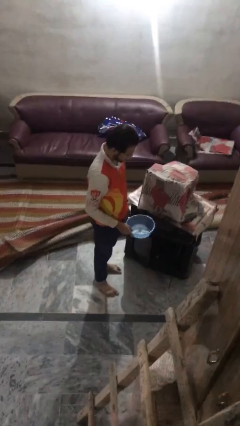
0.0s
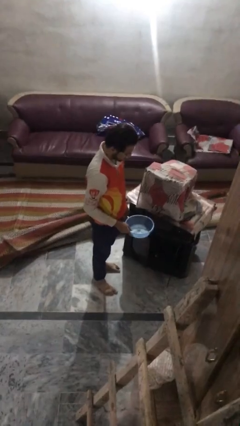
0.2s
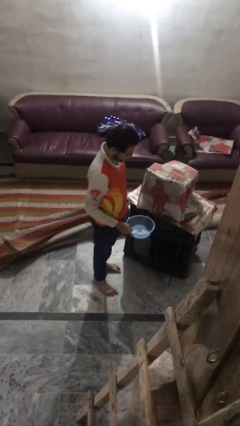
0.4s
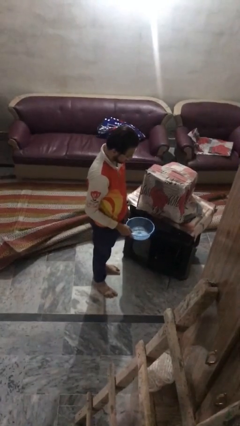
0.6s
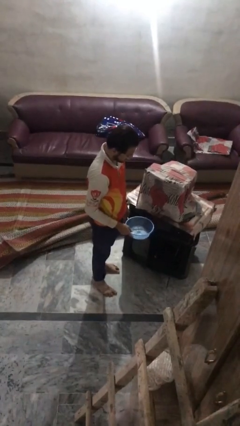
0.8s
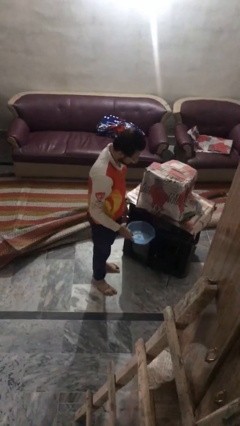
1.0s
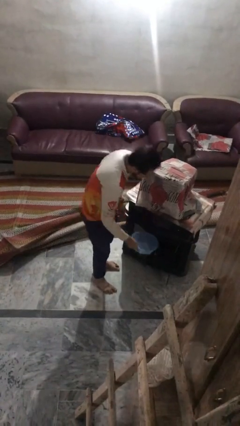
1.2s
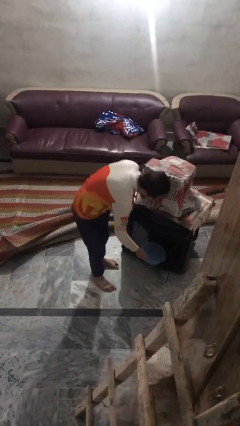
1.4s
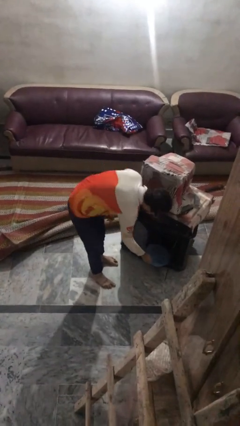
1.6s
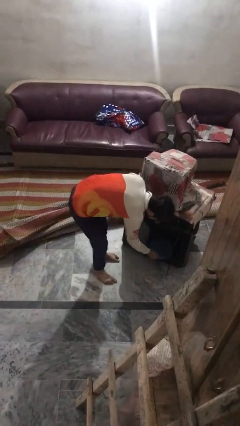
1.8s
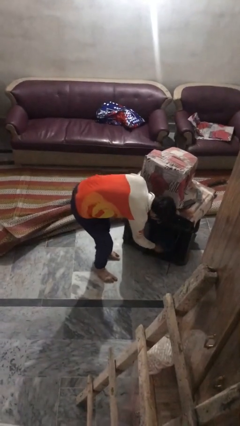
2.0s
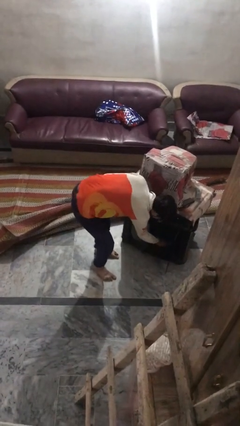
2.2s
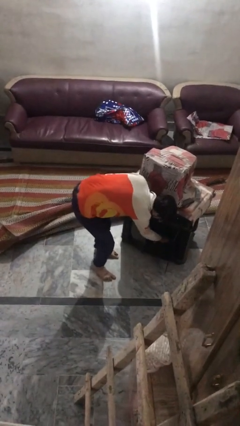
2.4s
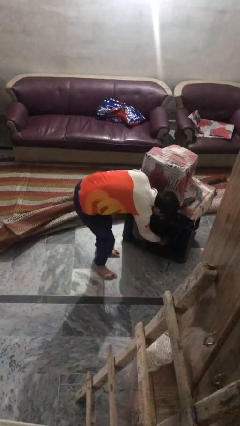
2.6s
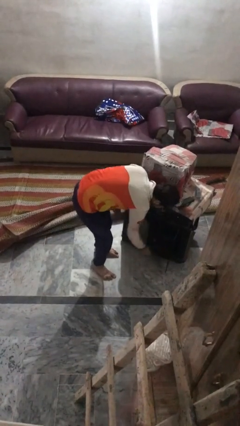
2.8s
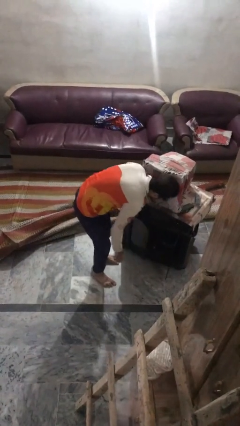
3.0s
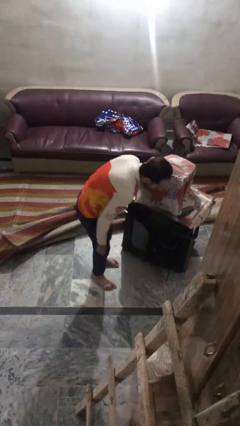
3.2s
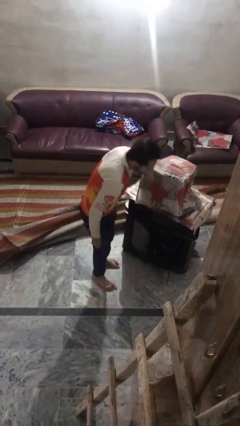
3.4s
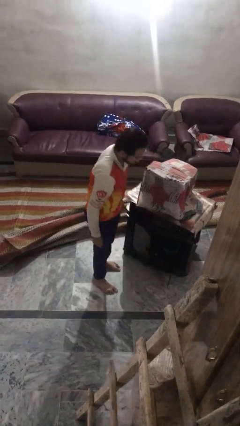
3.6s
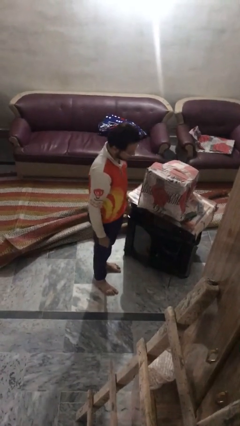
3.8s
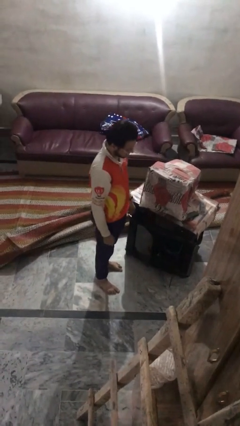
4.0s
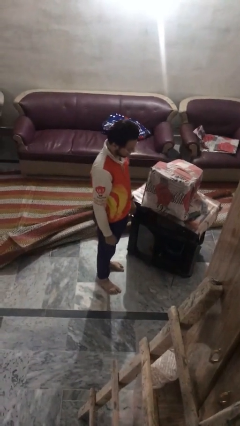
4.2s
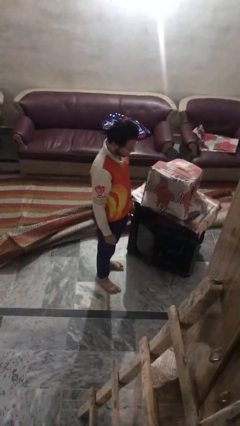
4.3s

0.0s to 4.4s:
person puts down object into cabinet

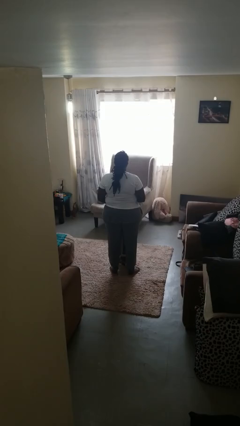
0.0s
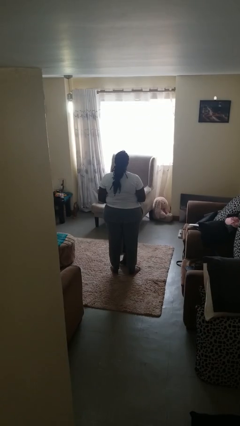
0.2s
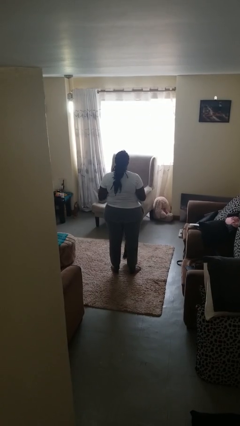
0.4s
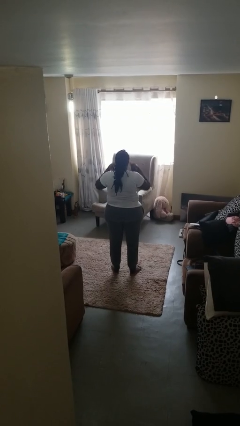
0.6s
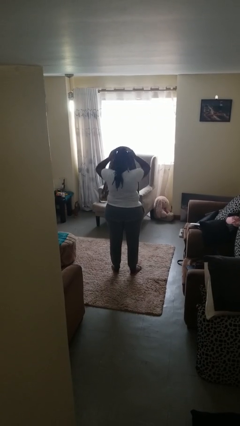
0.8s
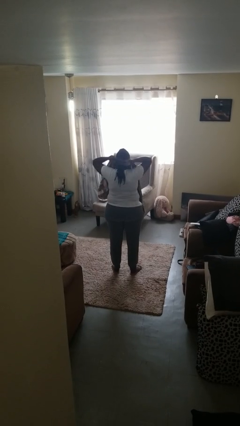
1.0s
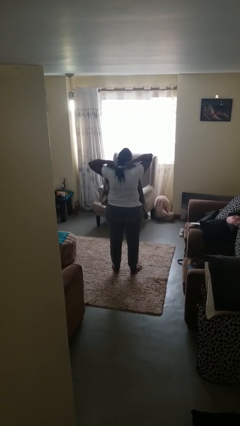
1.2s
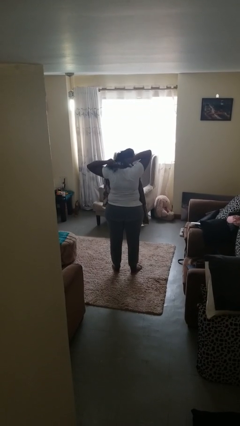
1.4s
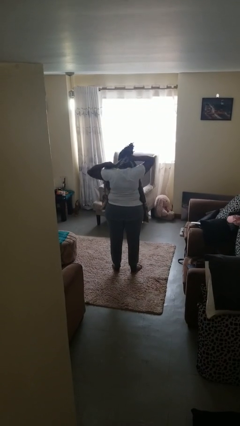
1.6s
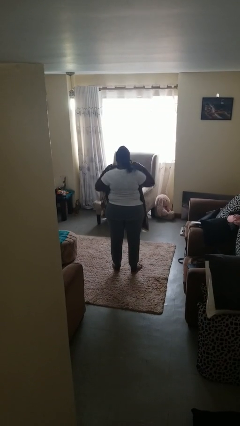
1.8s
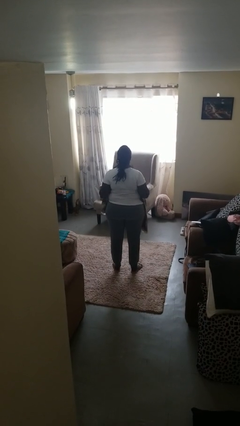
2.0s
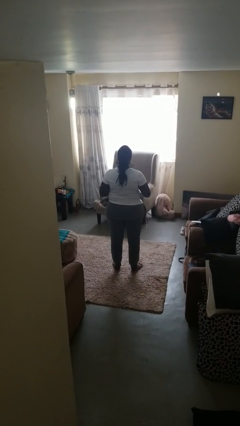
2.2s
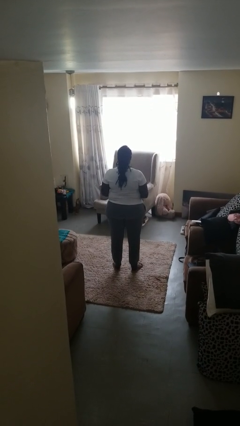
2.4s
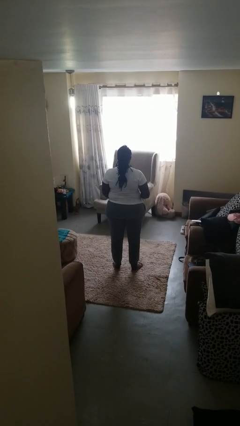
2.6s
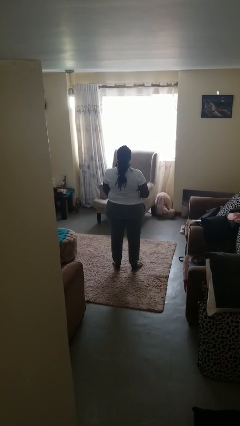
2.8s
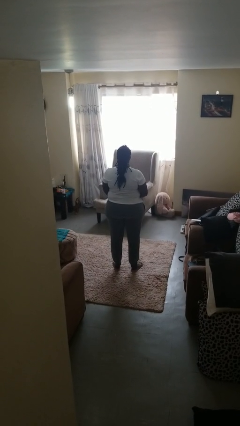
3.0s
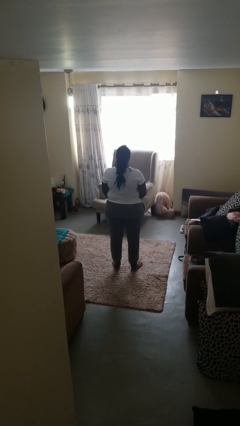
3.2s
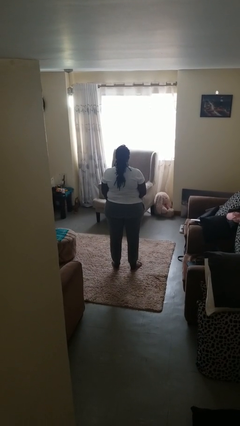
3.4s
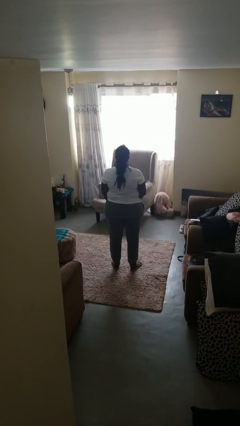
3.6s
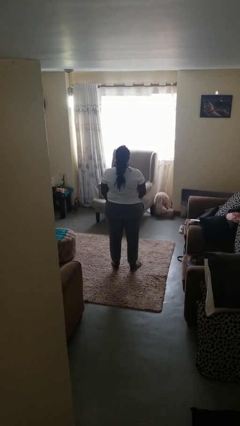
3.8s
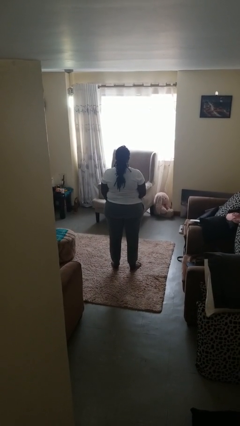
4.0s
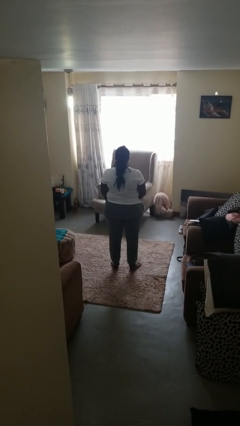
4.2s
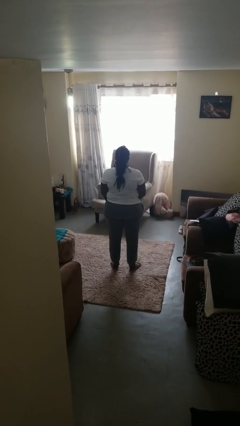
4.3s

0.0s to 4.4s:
person puts on scarf

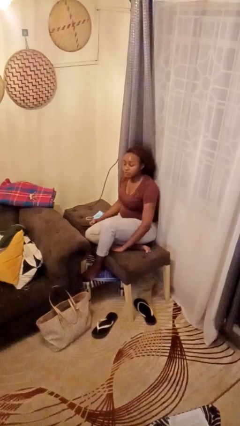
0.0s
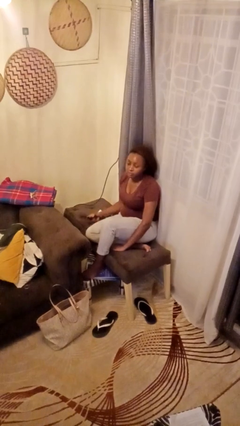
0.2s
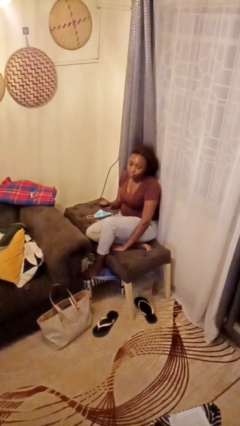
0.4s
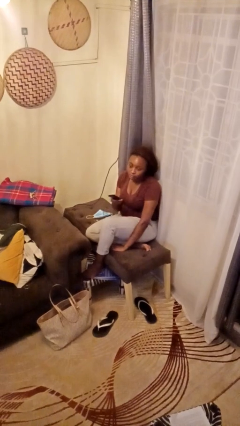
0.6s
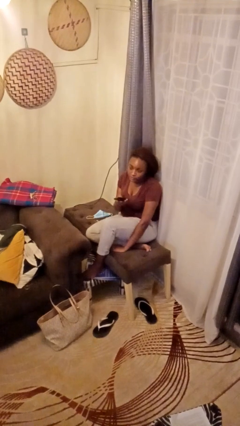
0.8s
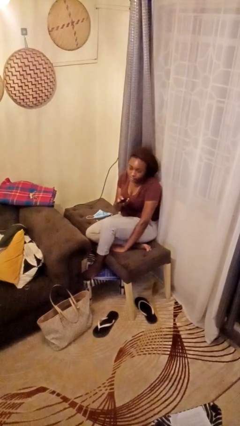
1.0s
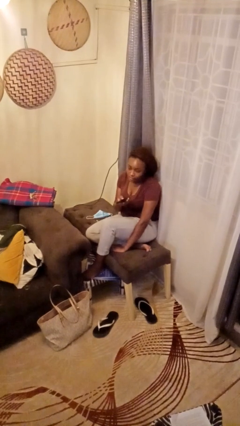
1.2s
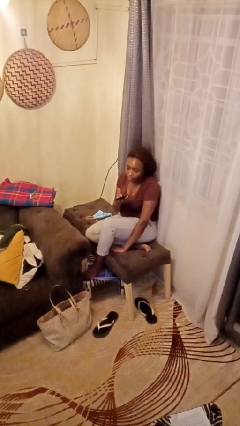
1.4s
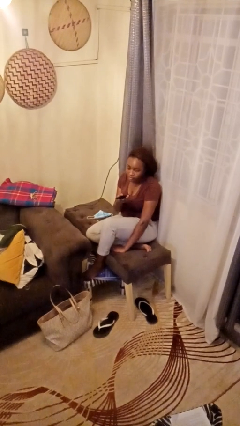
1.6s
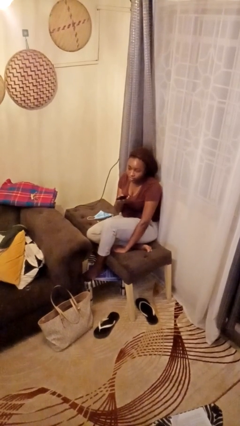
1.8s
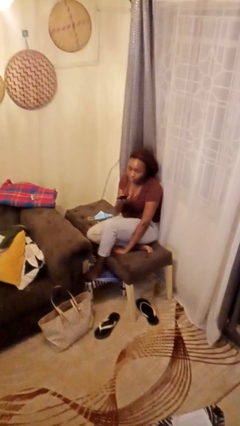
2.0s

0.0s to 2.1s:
person uses television remote

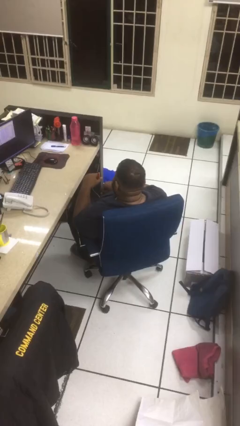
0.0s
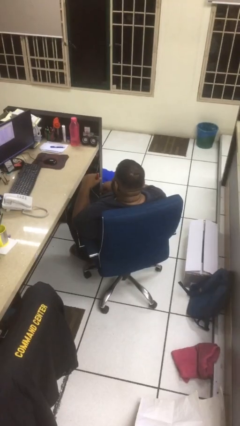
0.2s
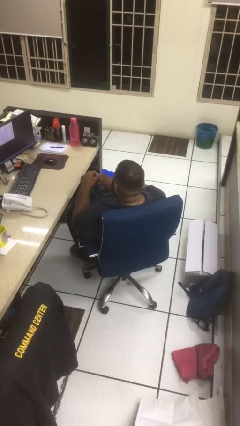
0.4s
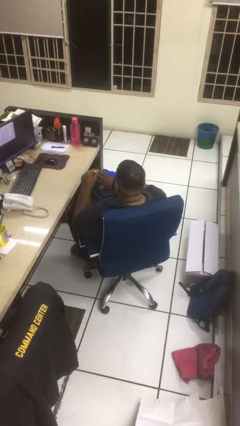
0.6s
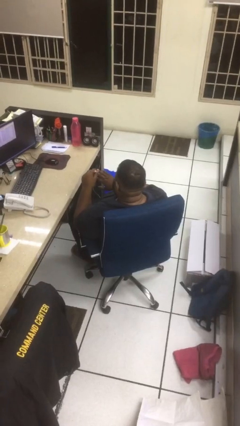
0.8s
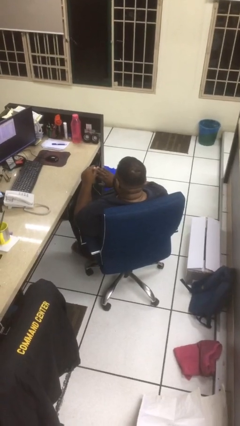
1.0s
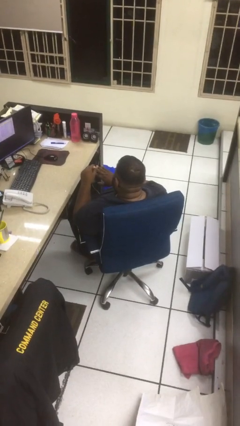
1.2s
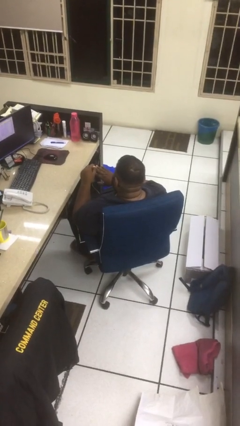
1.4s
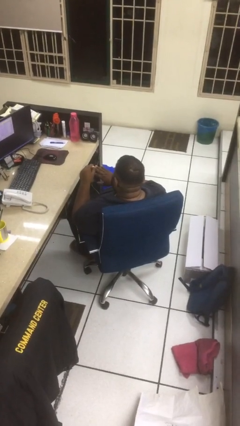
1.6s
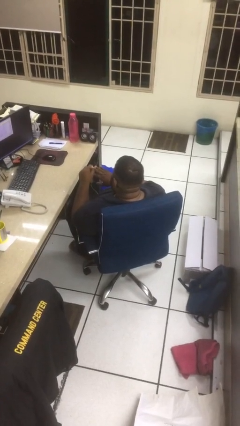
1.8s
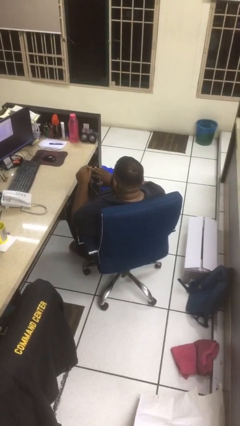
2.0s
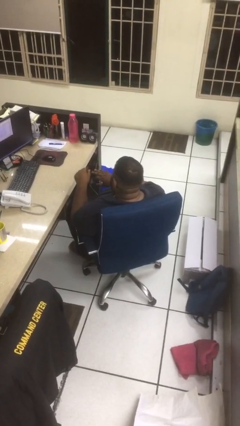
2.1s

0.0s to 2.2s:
person paints fingernails

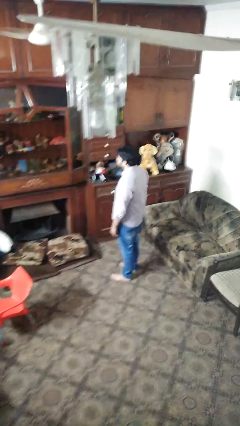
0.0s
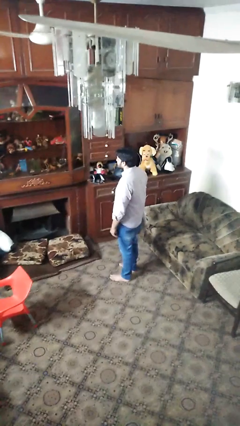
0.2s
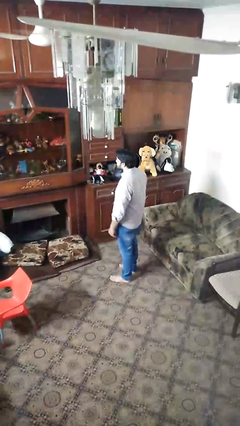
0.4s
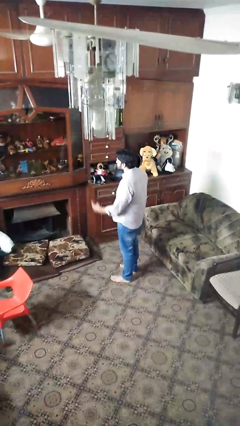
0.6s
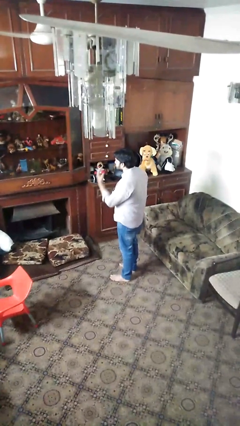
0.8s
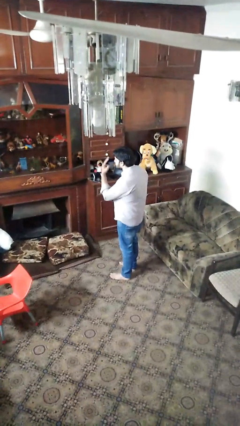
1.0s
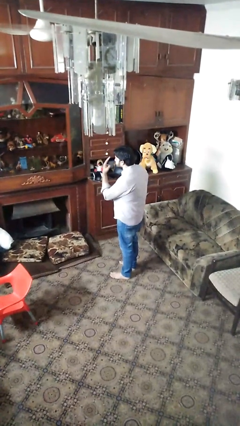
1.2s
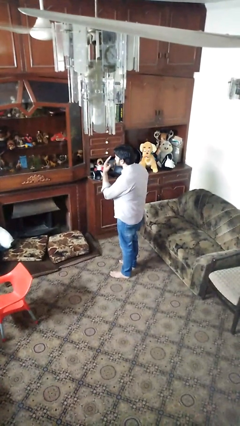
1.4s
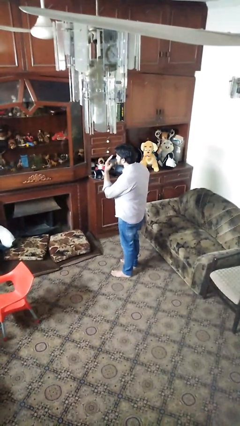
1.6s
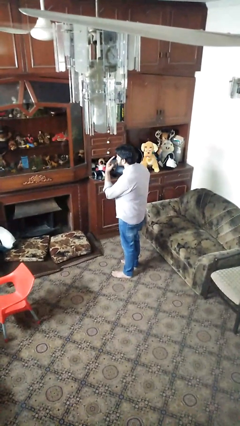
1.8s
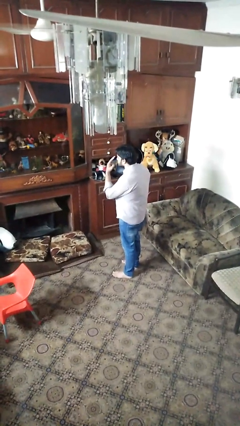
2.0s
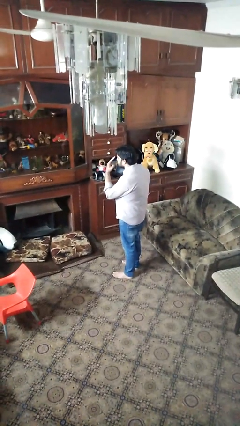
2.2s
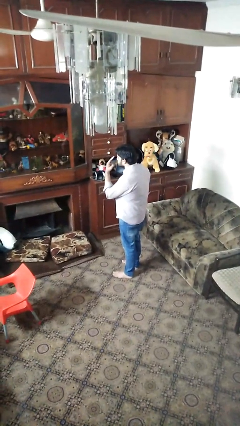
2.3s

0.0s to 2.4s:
person gestures watch closely

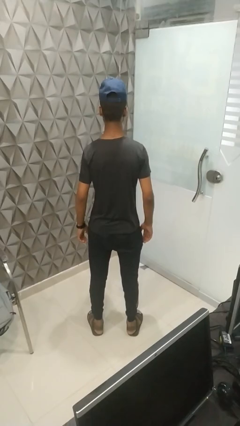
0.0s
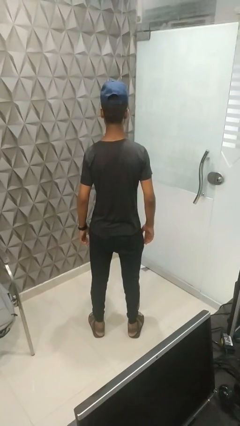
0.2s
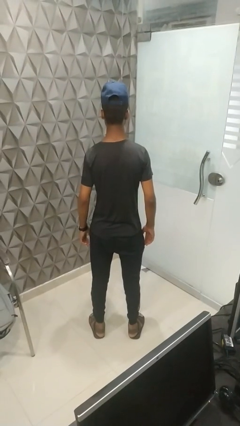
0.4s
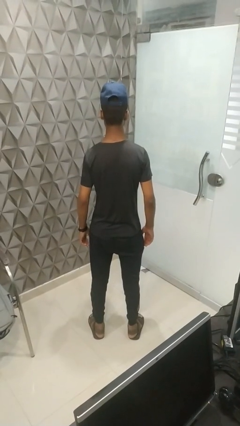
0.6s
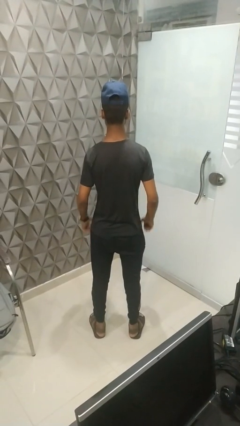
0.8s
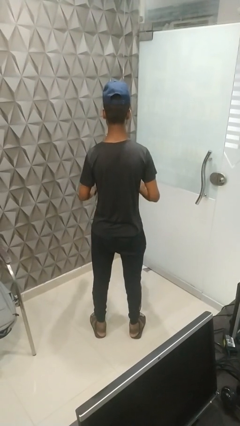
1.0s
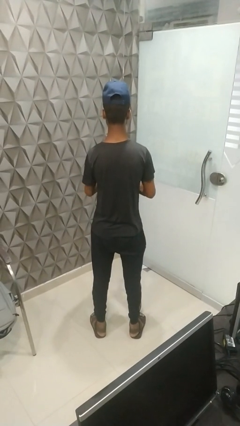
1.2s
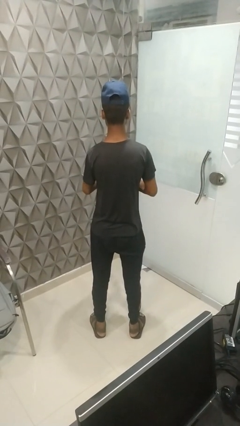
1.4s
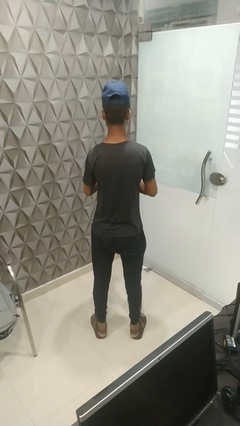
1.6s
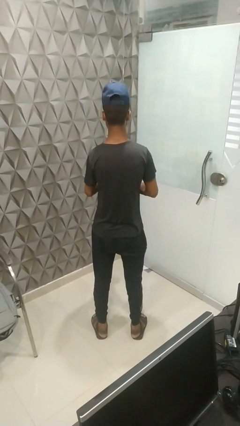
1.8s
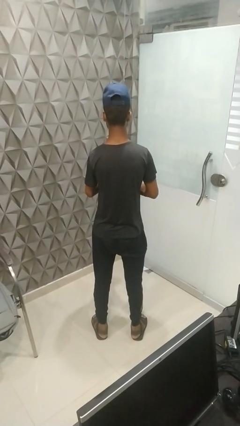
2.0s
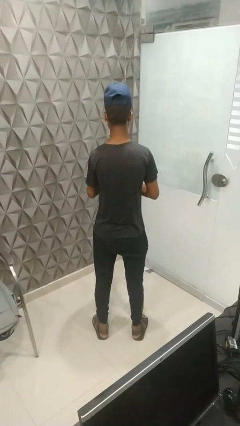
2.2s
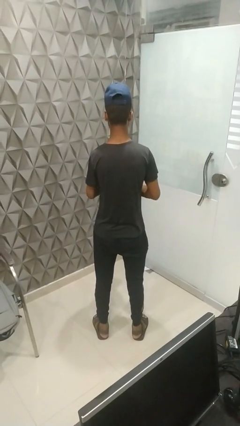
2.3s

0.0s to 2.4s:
person claps hands
